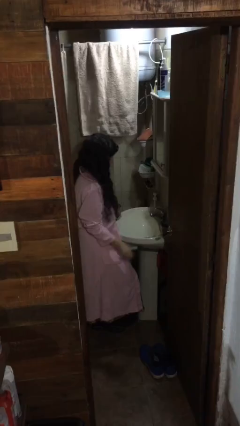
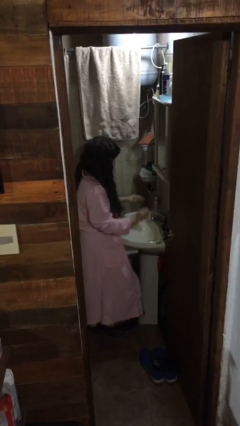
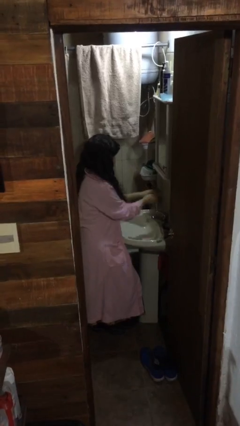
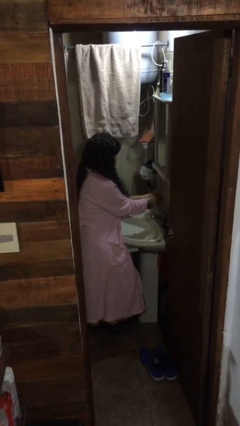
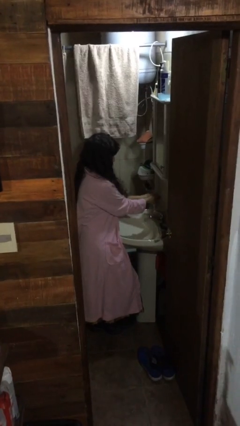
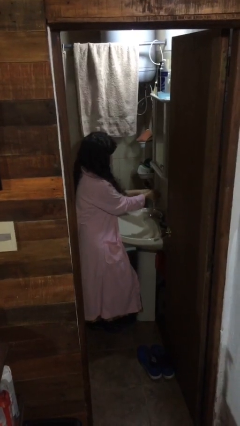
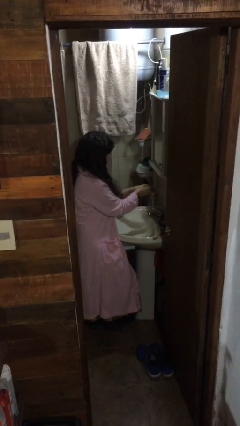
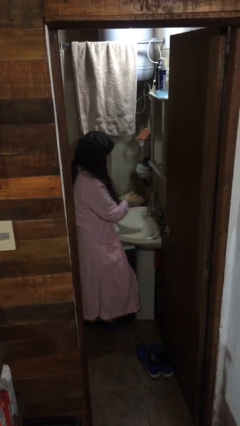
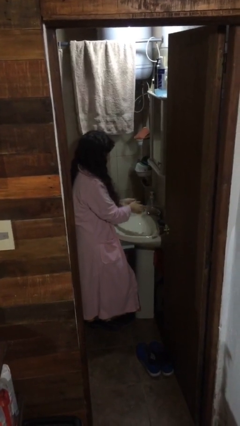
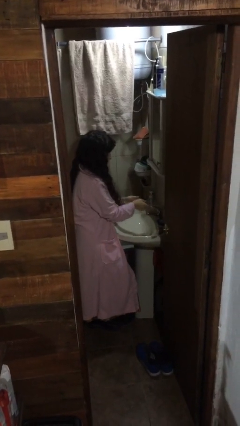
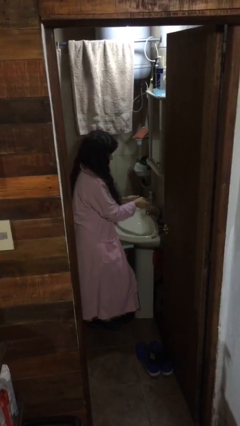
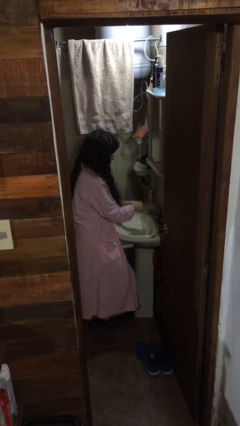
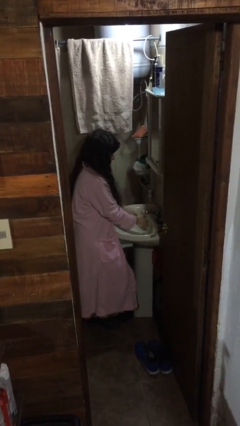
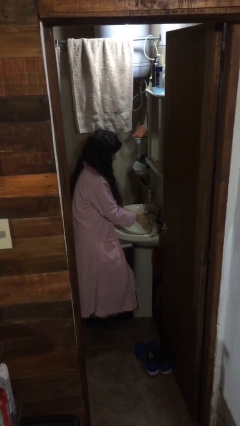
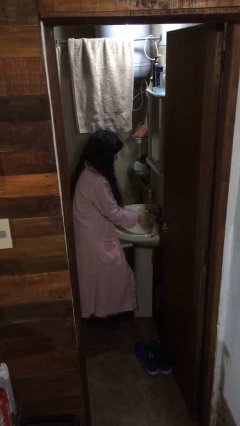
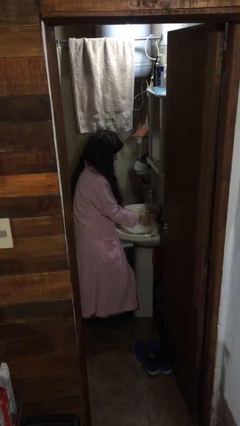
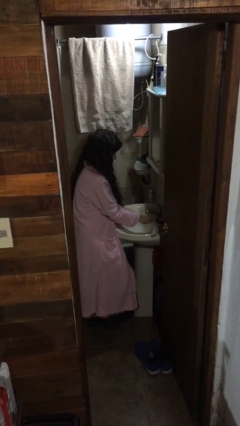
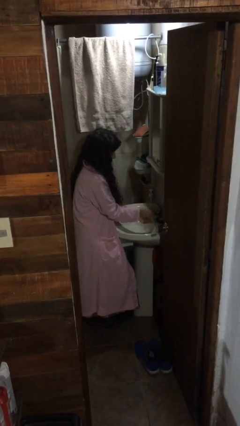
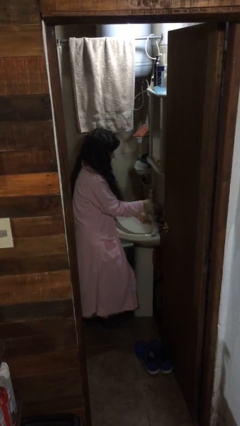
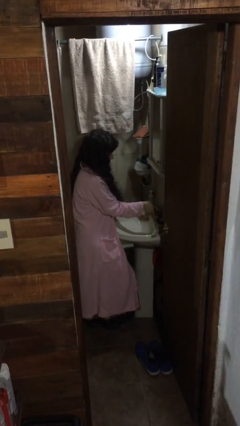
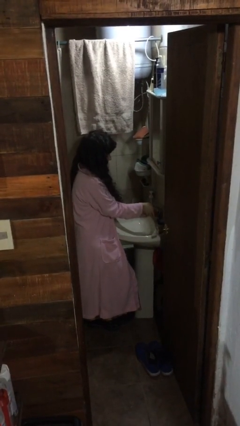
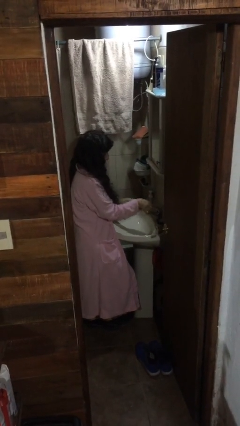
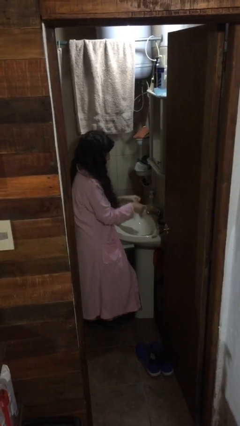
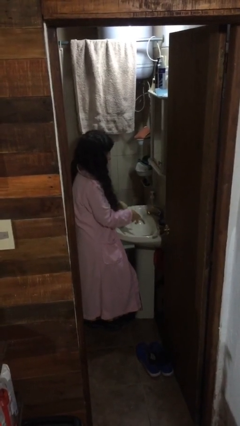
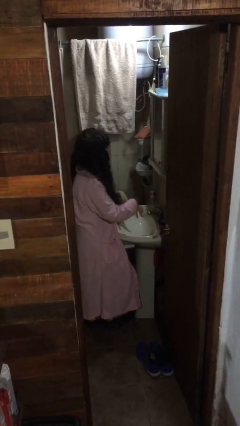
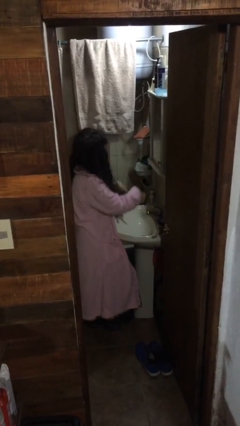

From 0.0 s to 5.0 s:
person washes hands

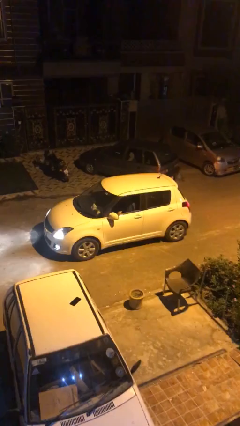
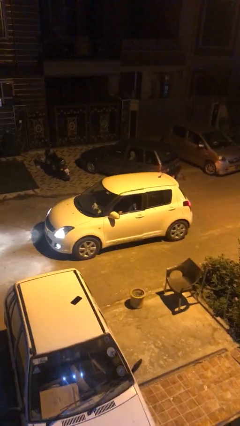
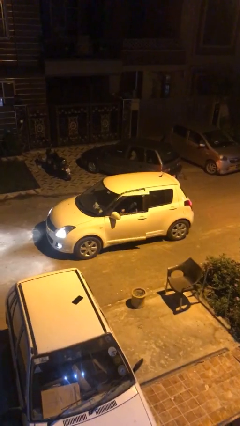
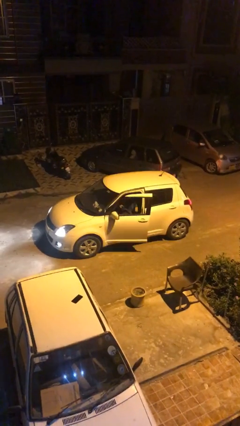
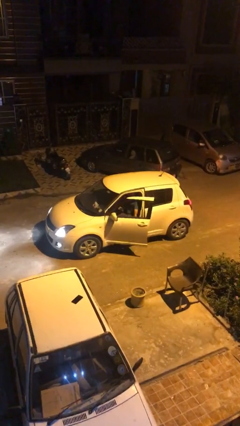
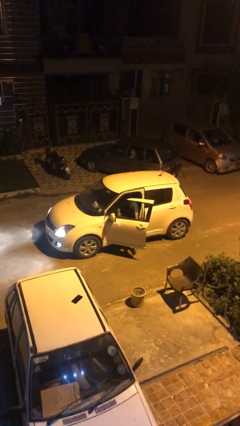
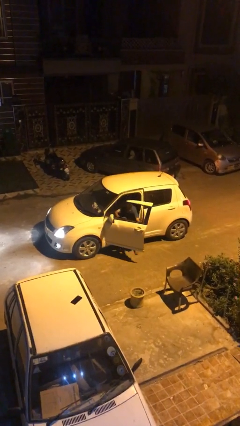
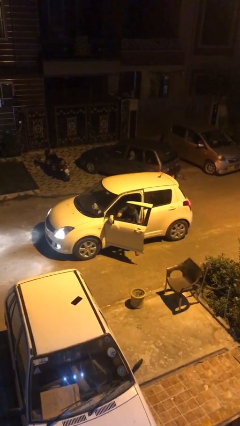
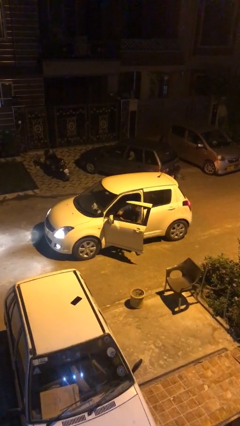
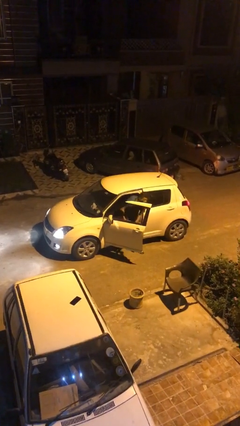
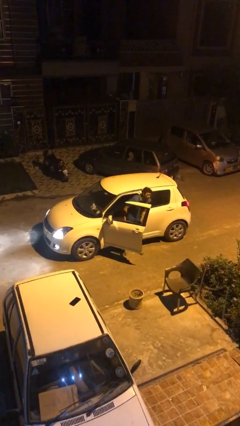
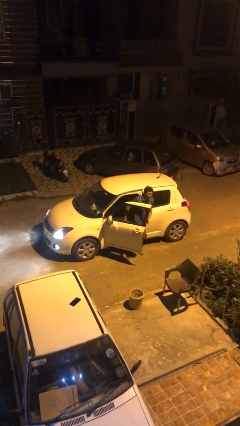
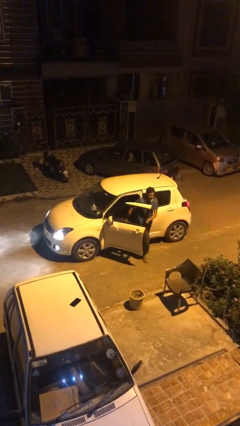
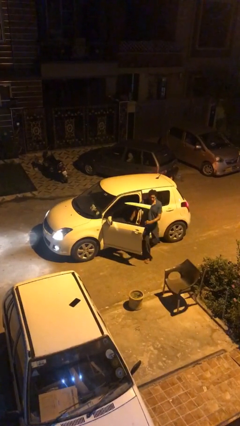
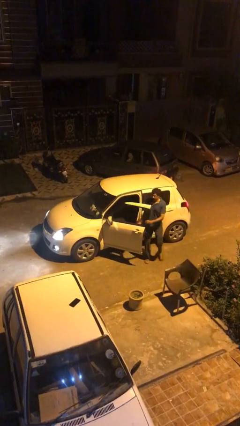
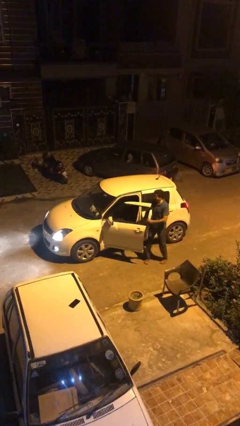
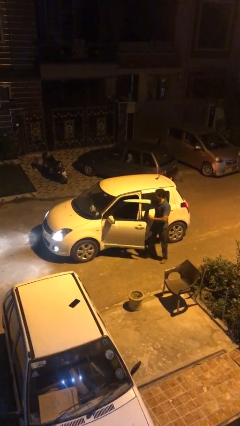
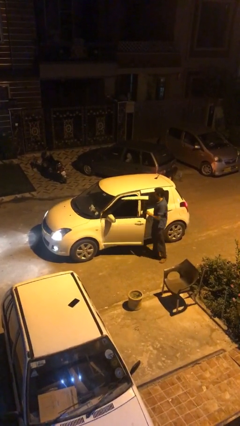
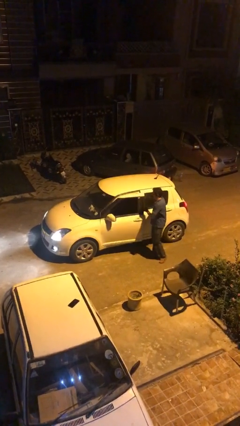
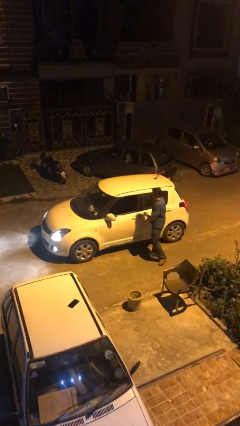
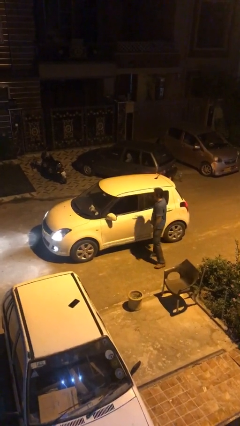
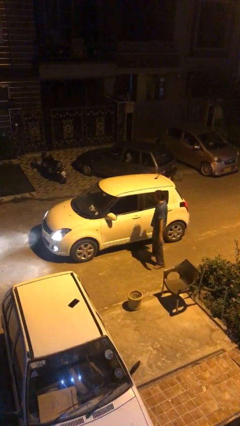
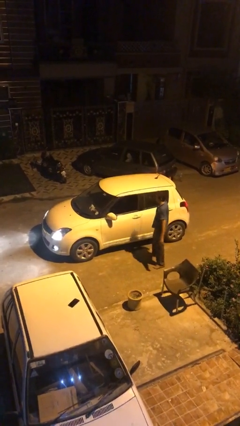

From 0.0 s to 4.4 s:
car drops off person

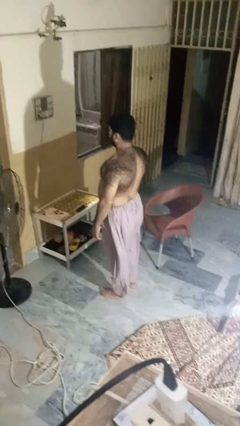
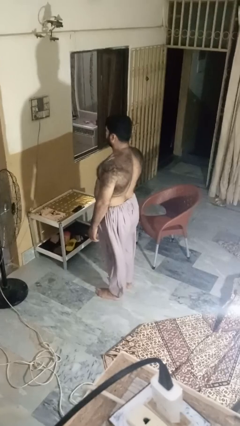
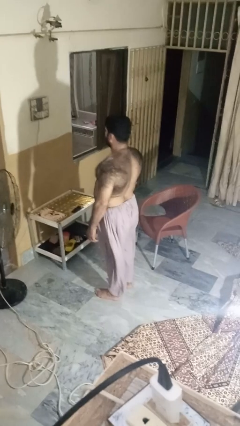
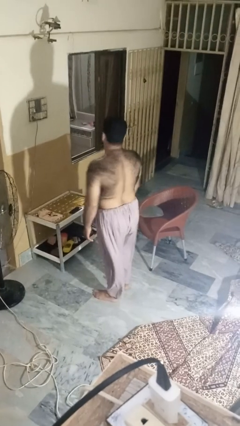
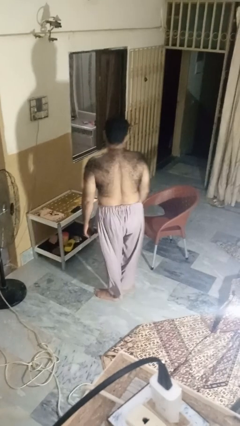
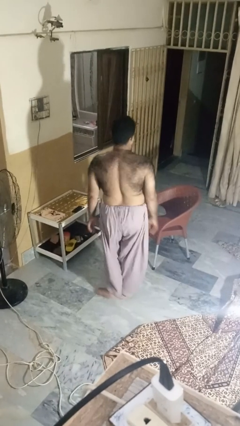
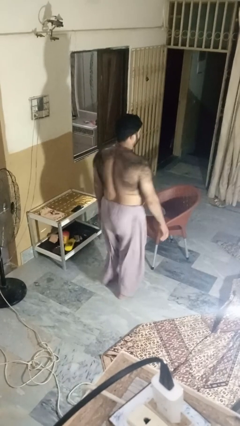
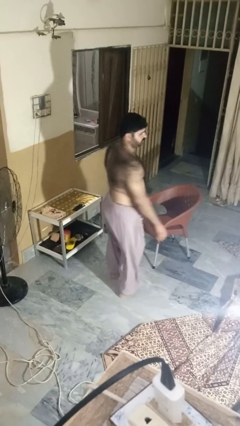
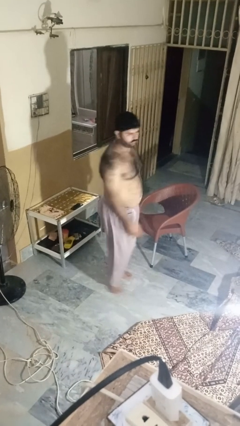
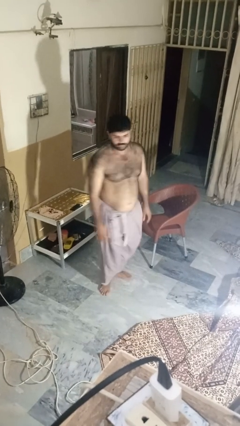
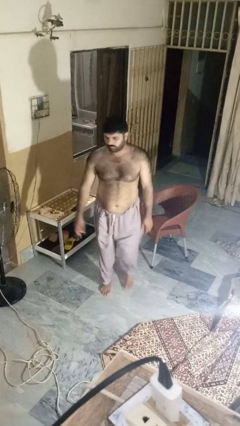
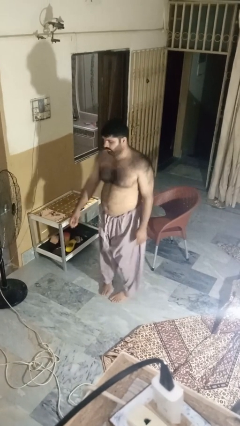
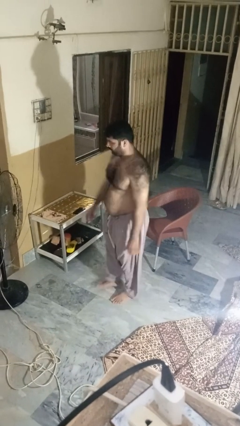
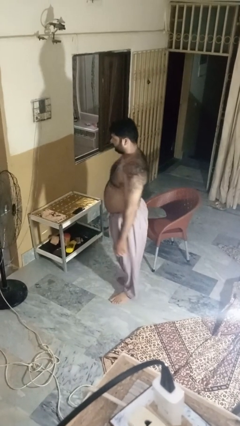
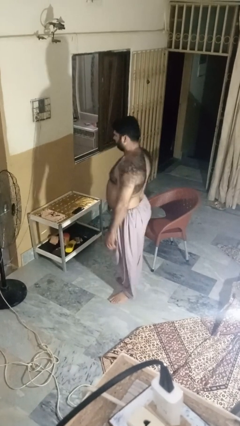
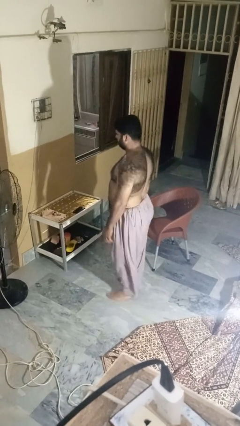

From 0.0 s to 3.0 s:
person twirls

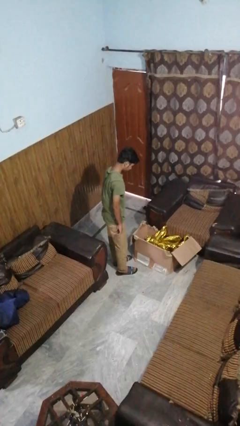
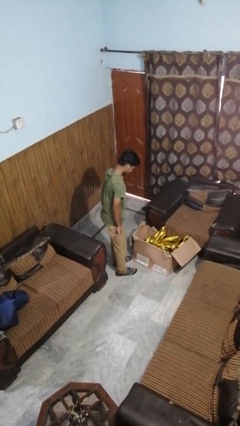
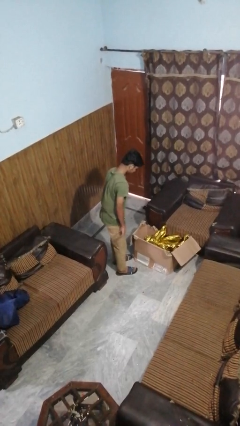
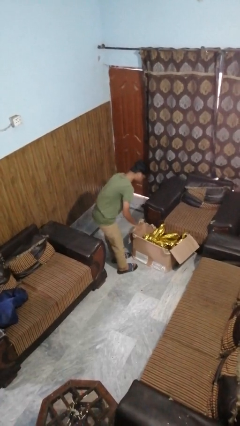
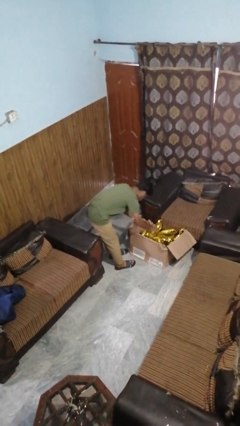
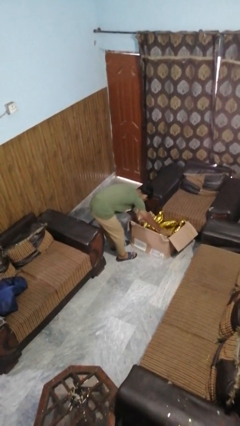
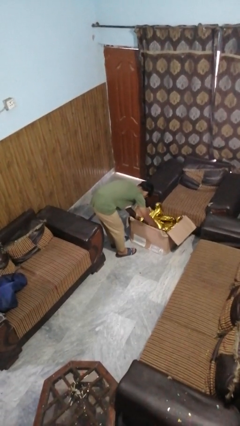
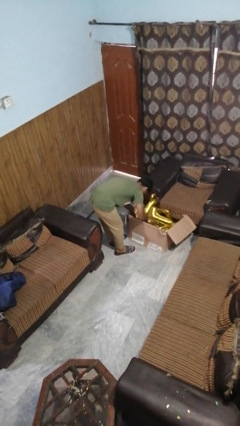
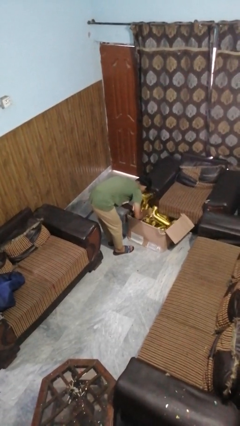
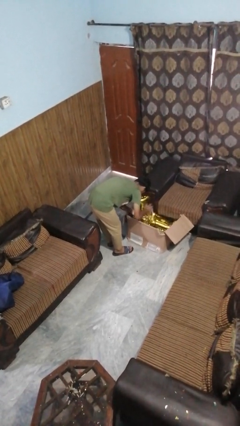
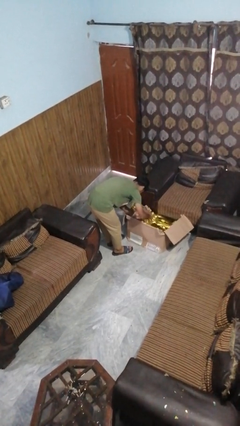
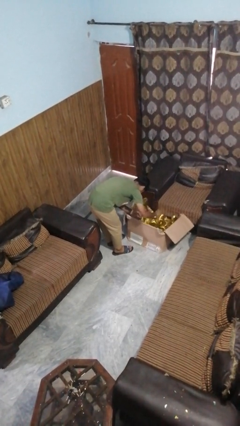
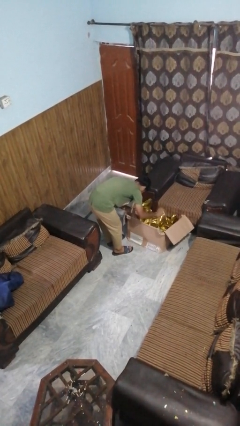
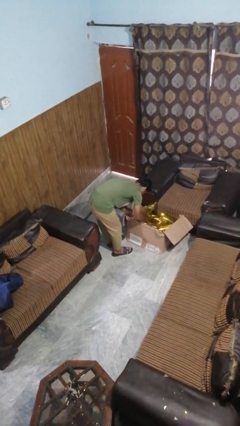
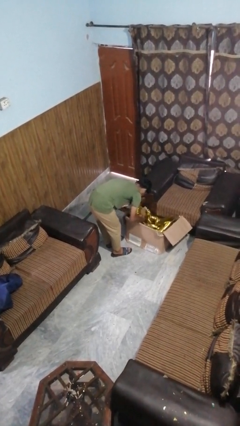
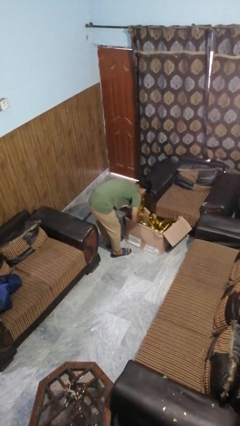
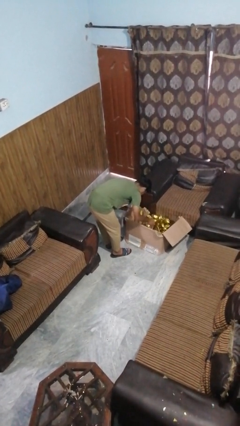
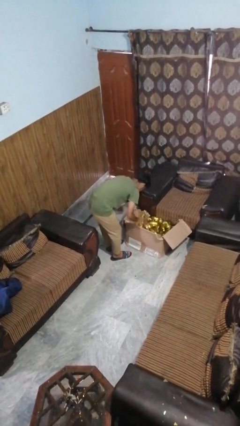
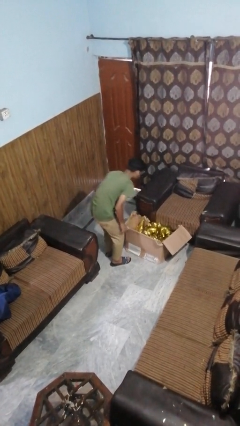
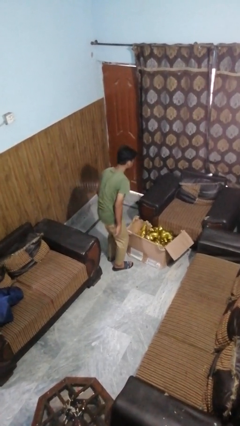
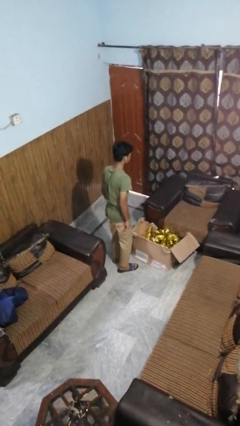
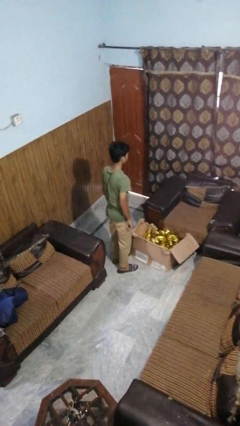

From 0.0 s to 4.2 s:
person searches in box

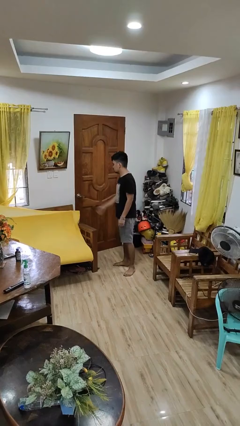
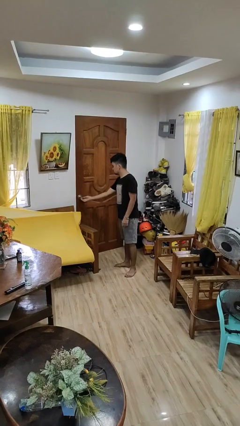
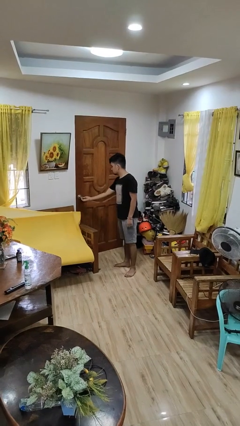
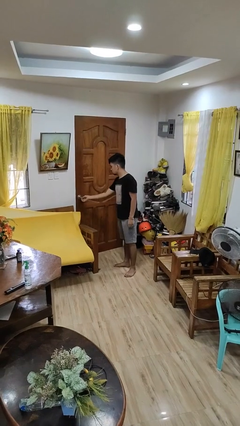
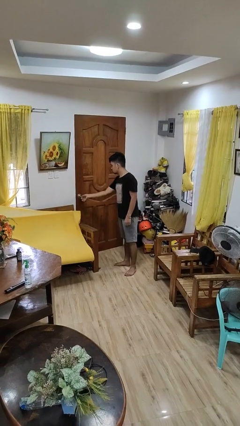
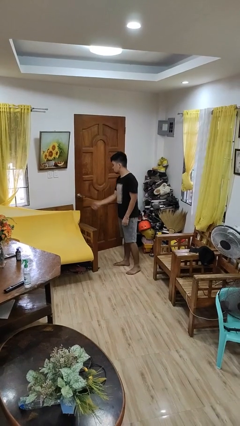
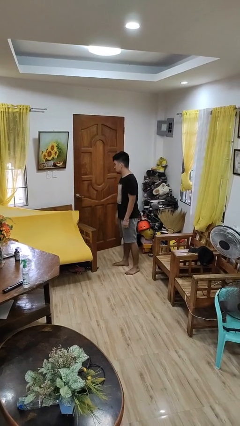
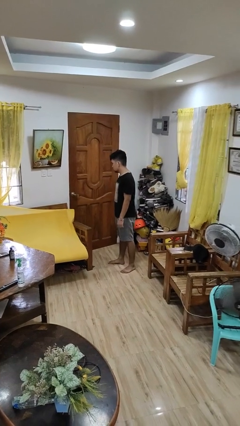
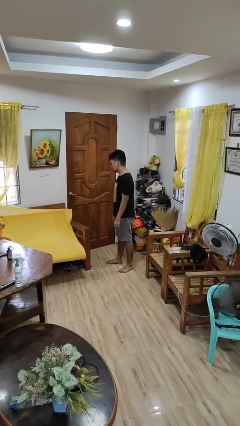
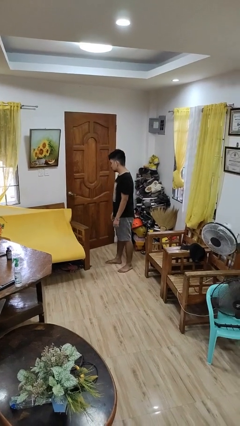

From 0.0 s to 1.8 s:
person locks door with keys
